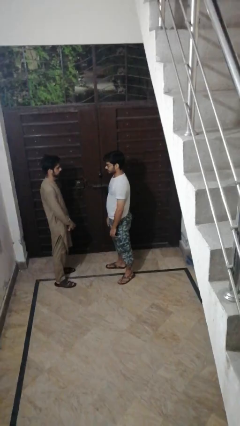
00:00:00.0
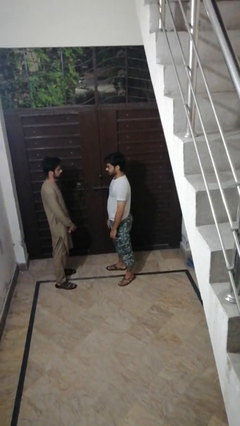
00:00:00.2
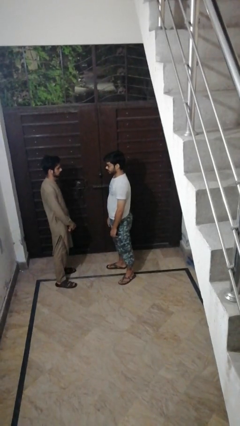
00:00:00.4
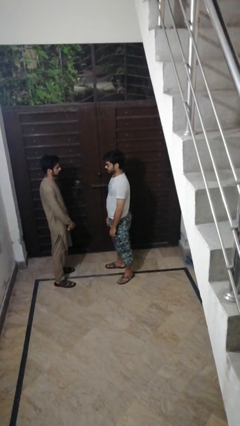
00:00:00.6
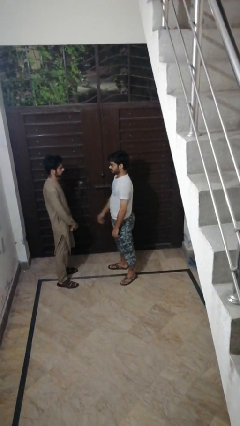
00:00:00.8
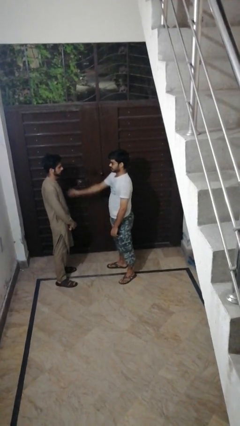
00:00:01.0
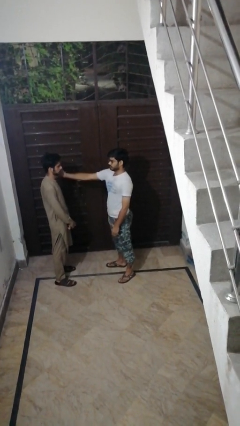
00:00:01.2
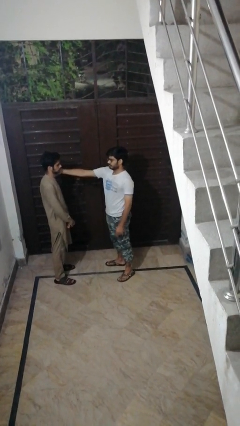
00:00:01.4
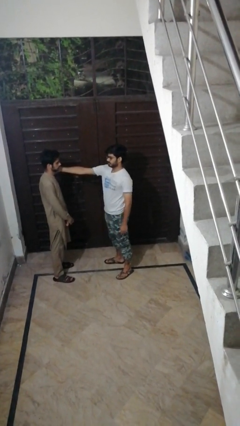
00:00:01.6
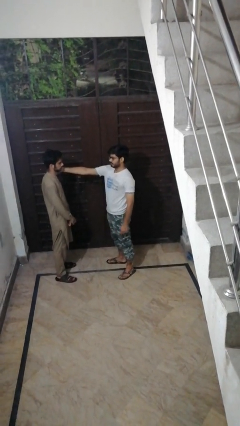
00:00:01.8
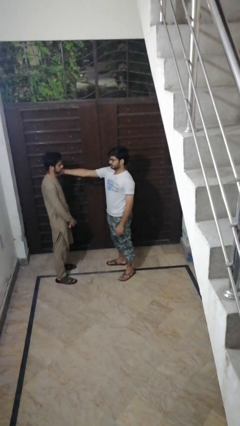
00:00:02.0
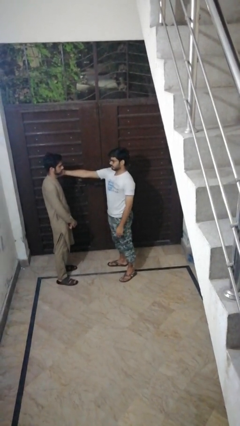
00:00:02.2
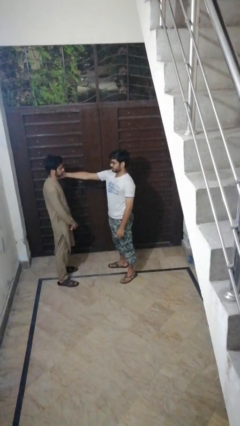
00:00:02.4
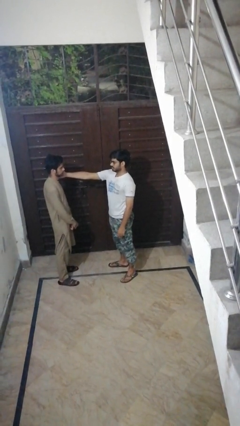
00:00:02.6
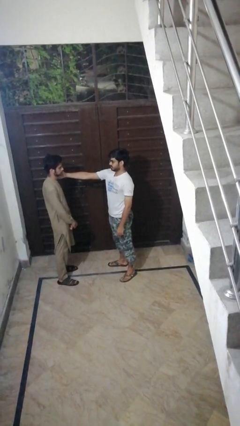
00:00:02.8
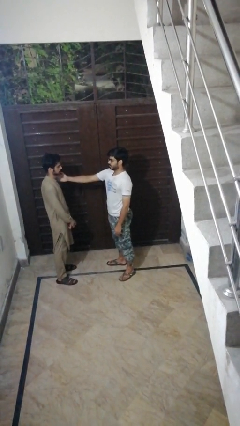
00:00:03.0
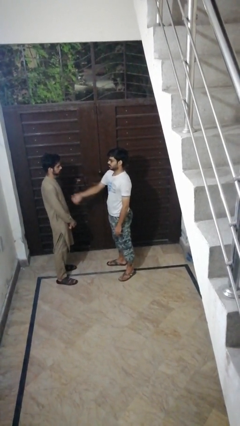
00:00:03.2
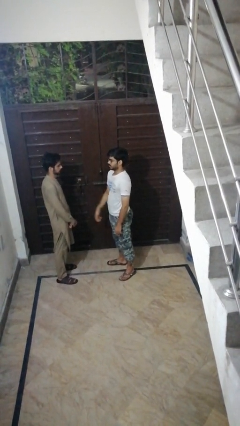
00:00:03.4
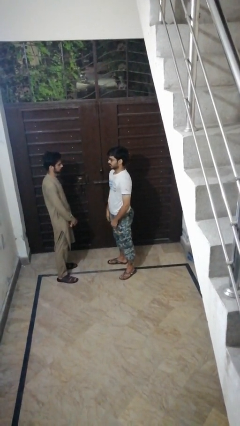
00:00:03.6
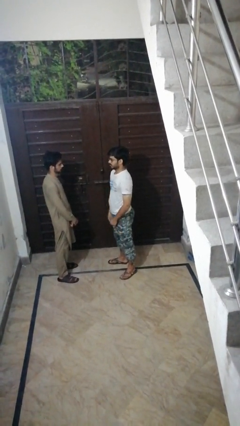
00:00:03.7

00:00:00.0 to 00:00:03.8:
person touches face of person

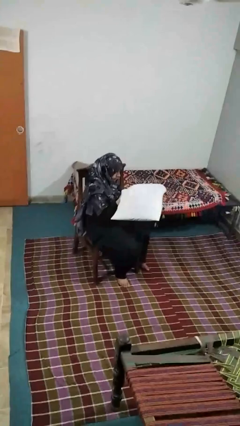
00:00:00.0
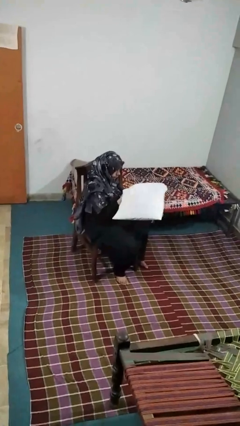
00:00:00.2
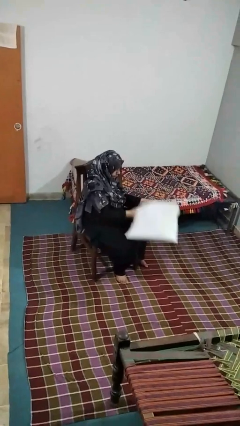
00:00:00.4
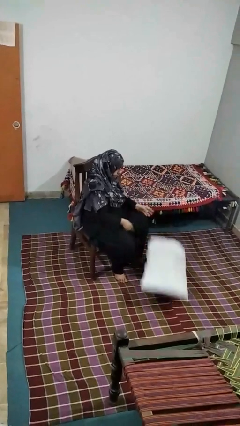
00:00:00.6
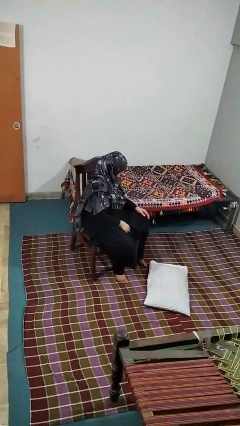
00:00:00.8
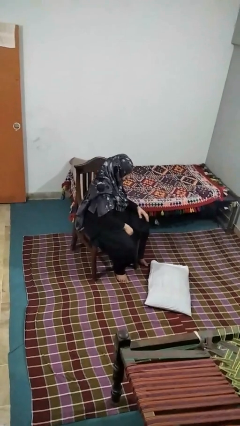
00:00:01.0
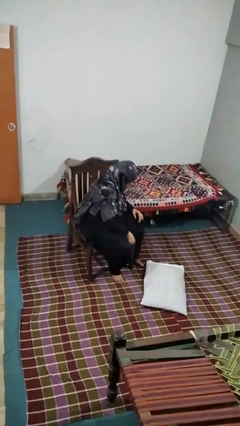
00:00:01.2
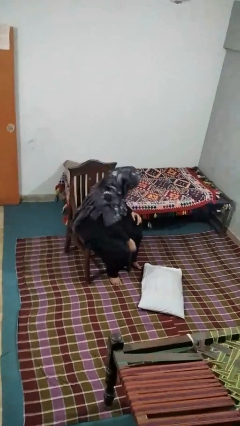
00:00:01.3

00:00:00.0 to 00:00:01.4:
person drops object

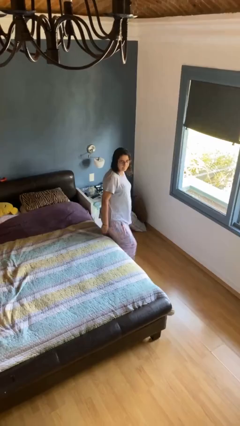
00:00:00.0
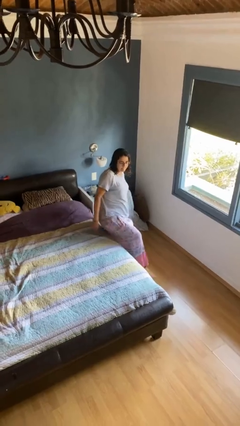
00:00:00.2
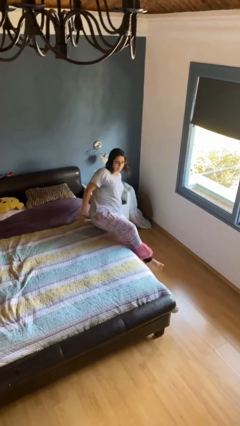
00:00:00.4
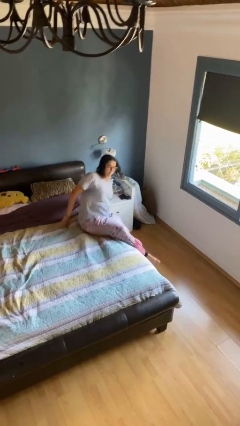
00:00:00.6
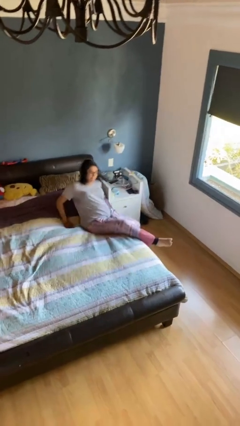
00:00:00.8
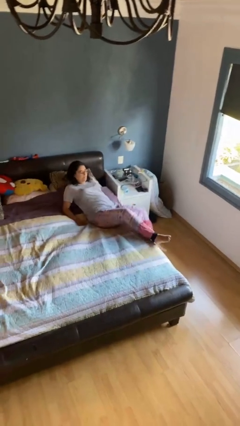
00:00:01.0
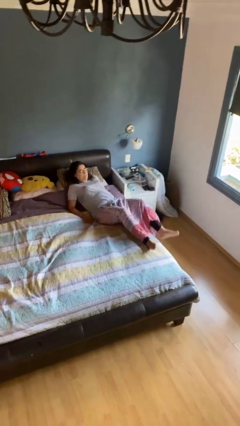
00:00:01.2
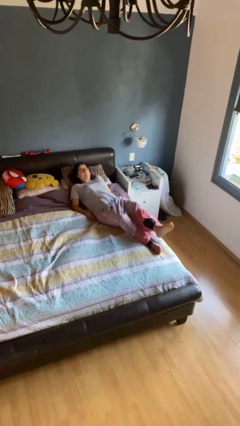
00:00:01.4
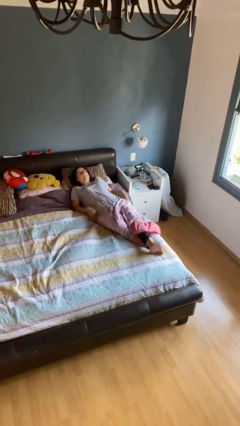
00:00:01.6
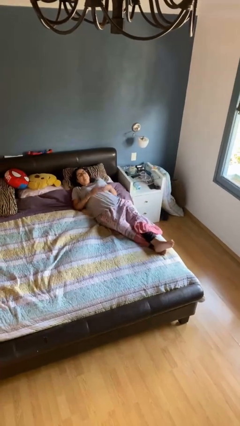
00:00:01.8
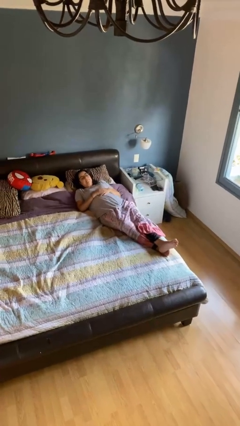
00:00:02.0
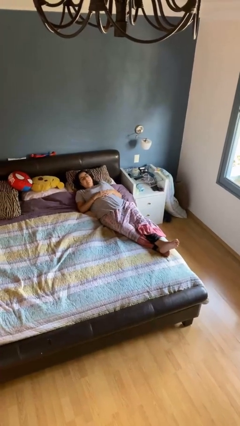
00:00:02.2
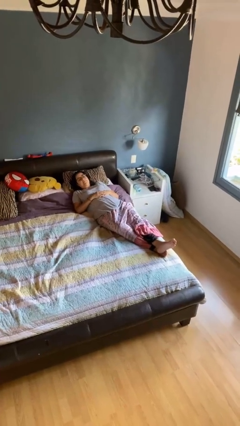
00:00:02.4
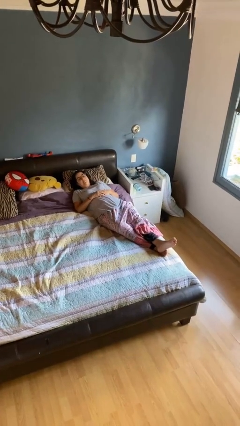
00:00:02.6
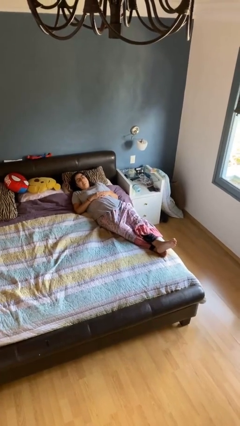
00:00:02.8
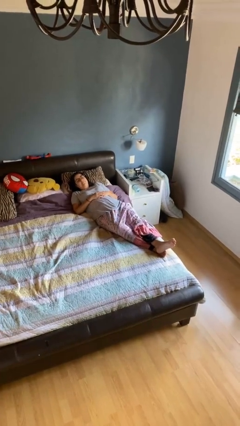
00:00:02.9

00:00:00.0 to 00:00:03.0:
person lies down on bed

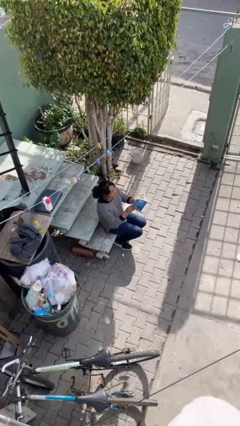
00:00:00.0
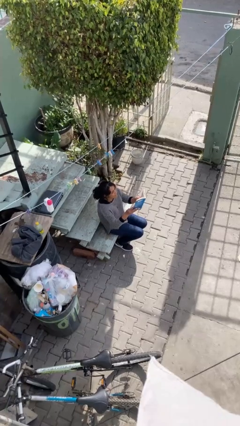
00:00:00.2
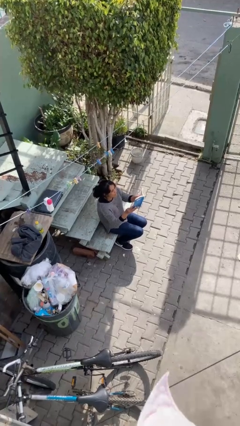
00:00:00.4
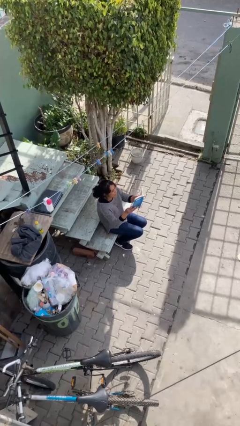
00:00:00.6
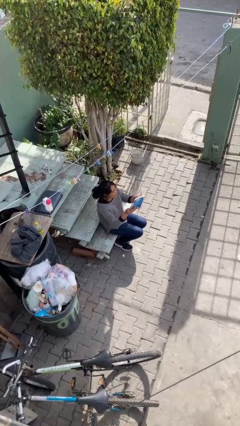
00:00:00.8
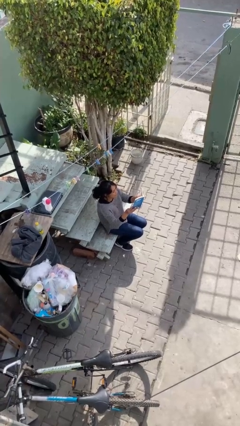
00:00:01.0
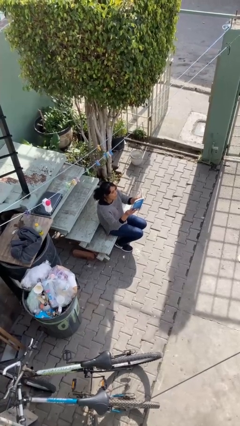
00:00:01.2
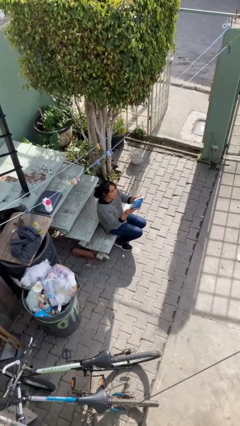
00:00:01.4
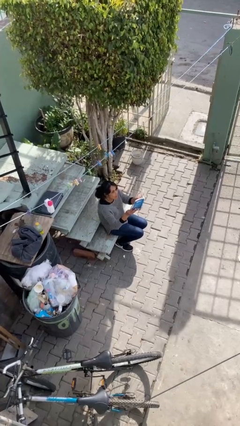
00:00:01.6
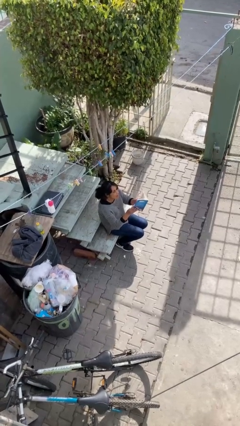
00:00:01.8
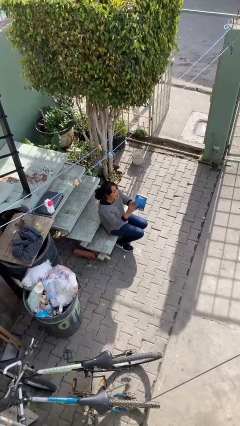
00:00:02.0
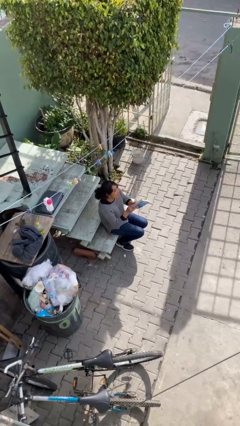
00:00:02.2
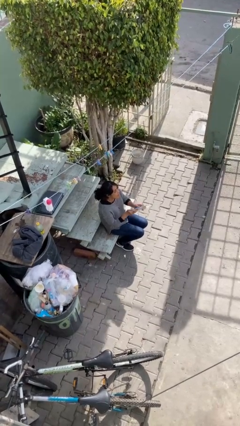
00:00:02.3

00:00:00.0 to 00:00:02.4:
person reads document

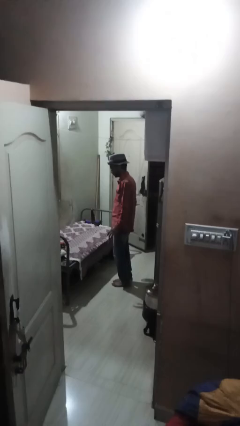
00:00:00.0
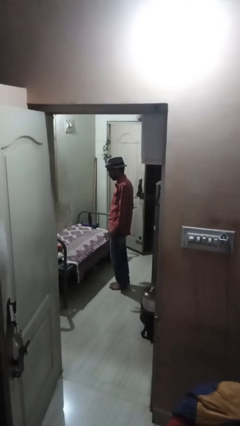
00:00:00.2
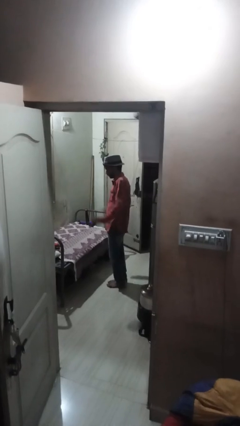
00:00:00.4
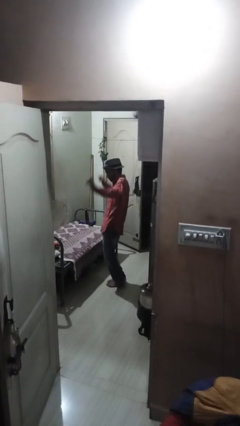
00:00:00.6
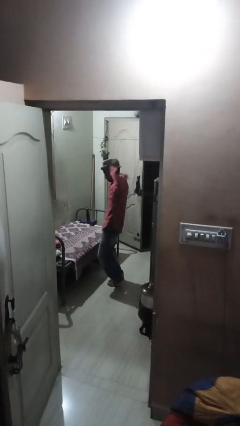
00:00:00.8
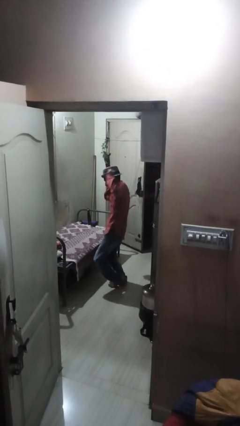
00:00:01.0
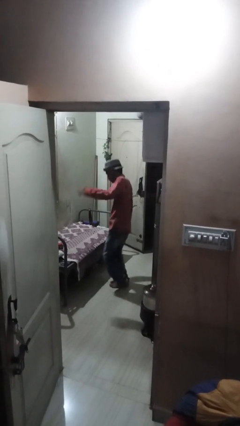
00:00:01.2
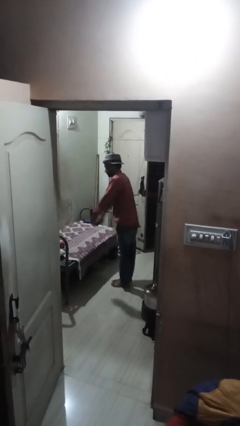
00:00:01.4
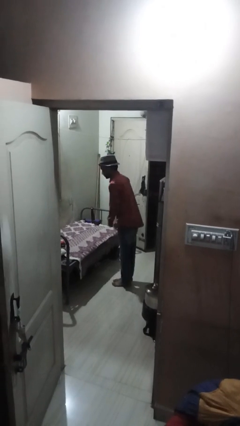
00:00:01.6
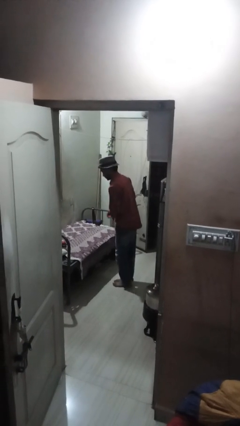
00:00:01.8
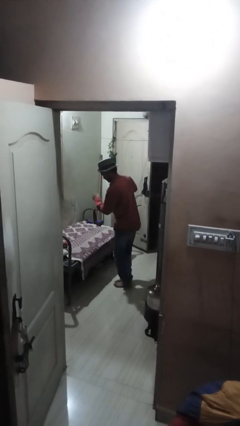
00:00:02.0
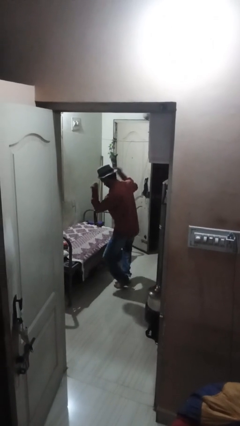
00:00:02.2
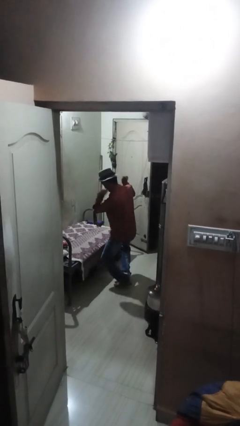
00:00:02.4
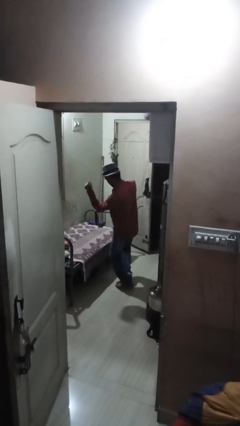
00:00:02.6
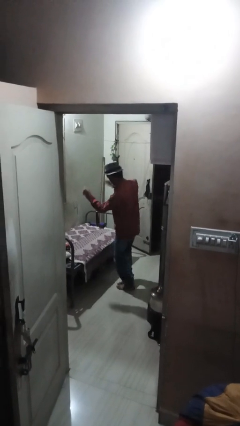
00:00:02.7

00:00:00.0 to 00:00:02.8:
person dances in place

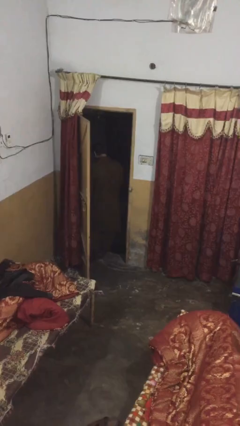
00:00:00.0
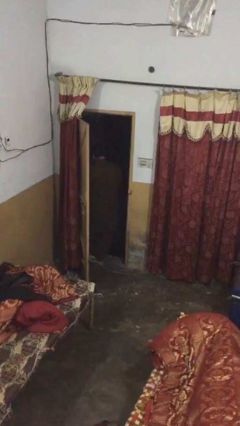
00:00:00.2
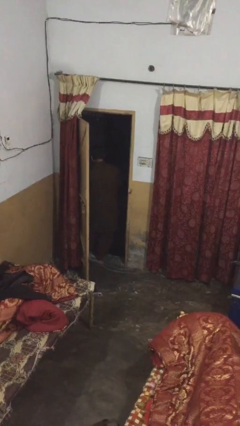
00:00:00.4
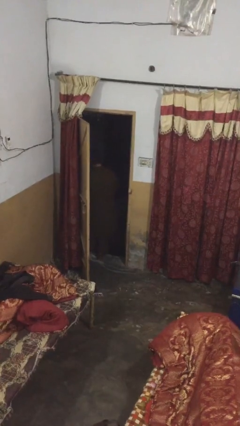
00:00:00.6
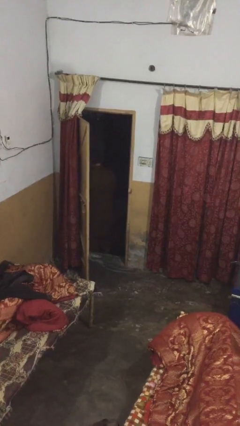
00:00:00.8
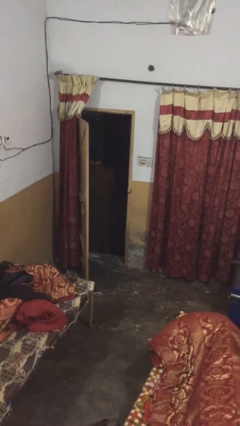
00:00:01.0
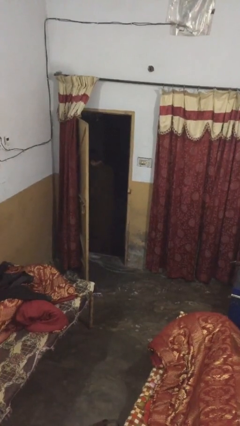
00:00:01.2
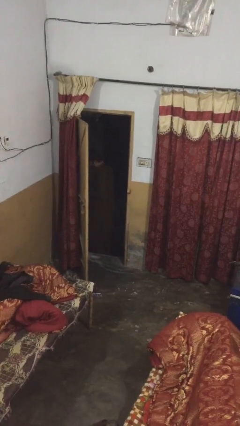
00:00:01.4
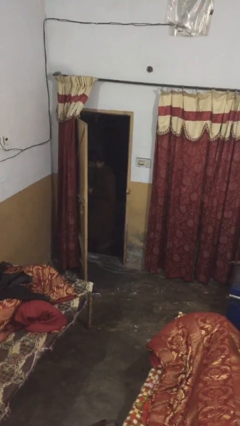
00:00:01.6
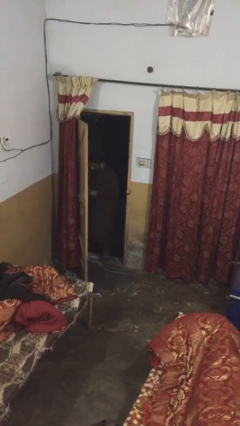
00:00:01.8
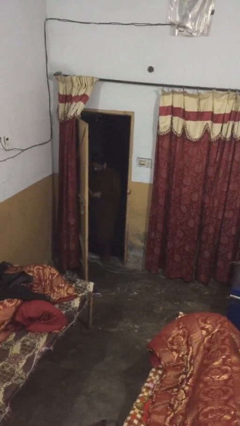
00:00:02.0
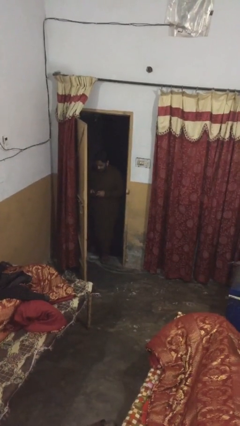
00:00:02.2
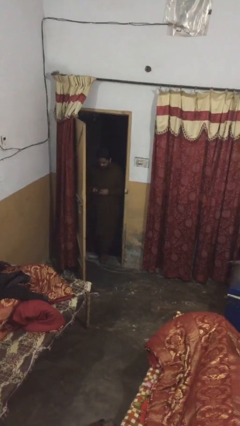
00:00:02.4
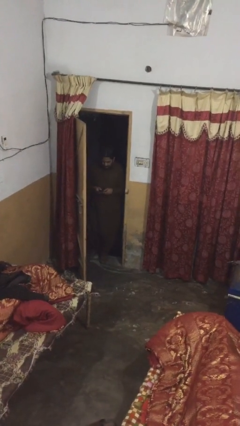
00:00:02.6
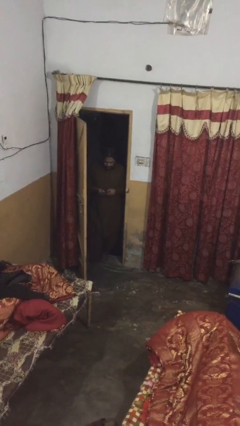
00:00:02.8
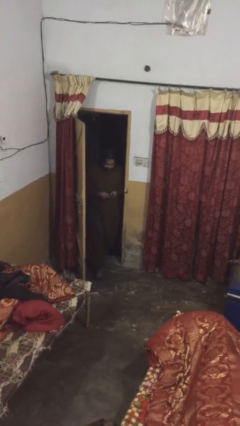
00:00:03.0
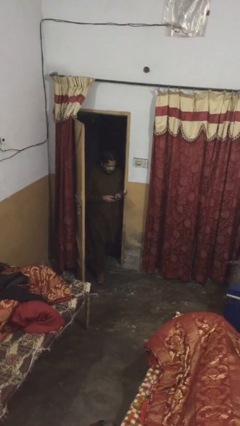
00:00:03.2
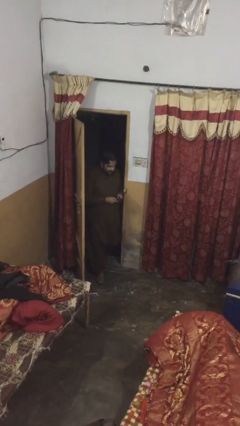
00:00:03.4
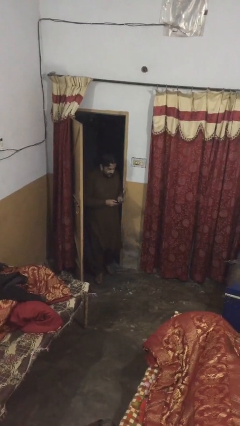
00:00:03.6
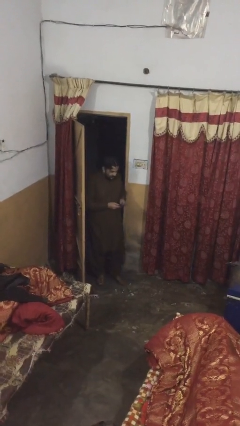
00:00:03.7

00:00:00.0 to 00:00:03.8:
person enters scene through structure
